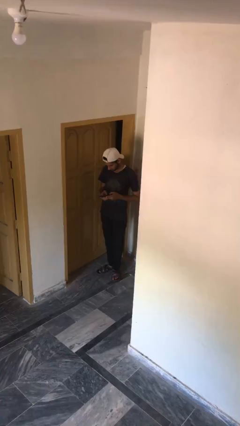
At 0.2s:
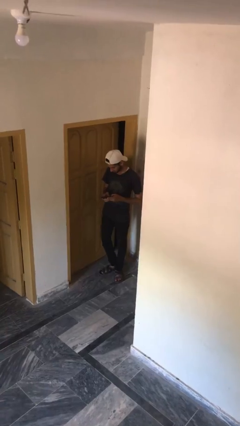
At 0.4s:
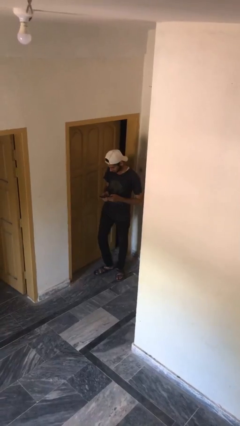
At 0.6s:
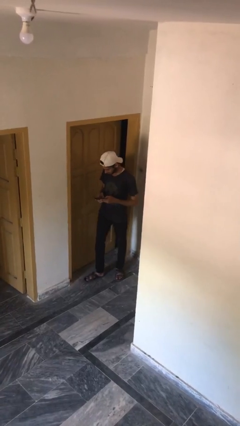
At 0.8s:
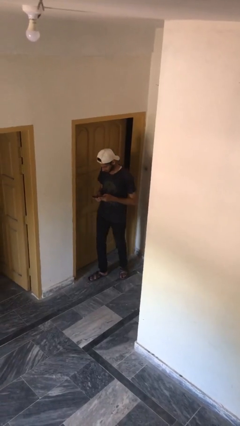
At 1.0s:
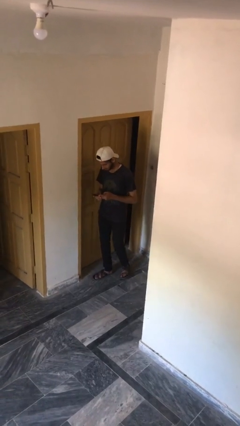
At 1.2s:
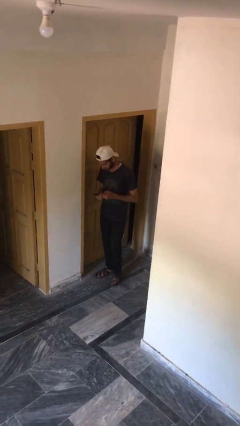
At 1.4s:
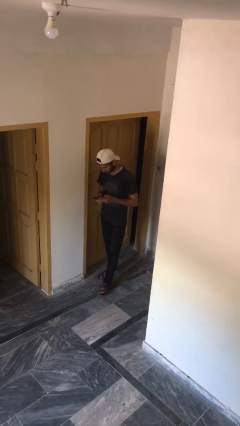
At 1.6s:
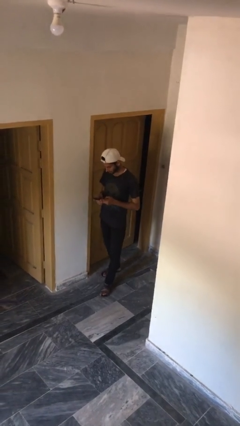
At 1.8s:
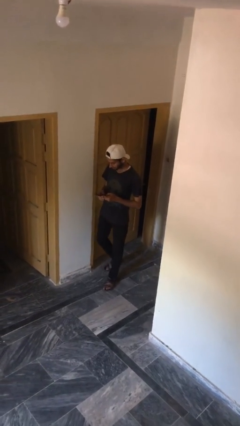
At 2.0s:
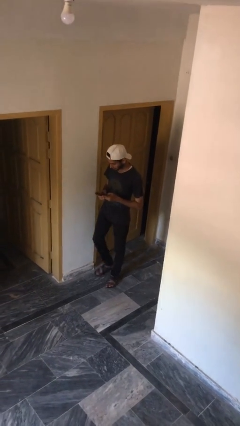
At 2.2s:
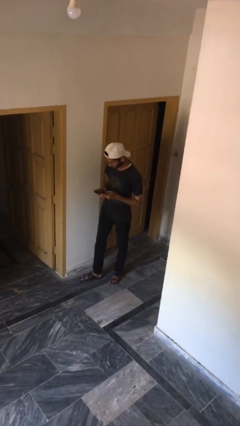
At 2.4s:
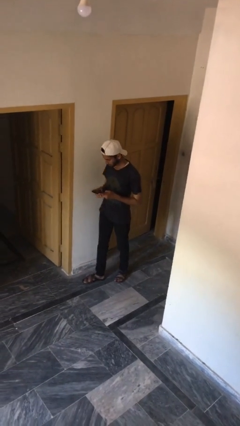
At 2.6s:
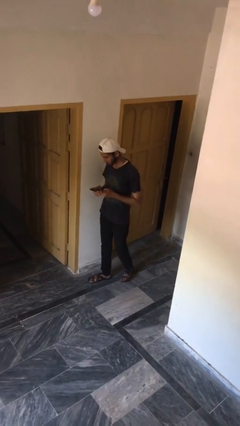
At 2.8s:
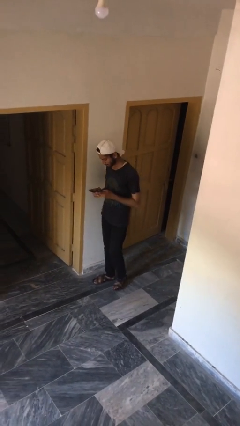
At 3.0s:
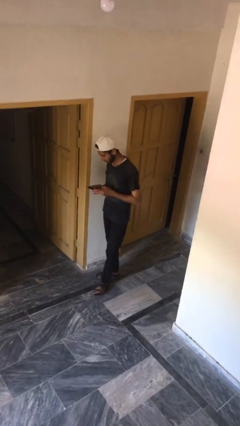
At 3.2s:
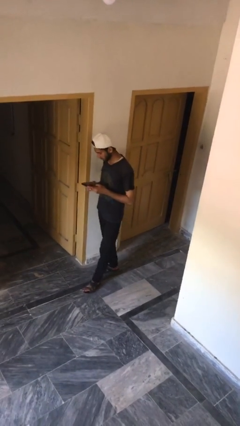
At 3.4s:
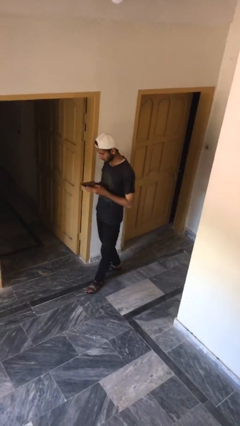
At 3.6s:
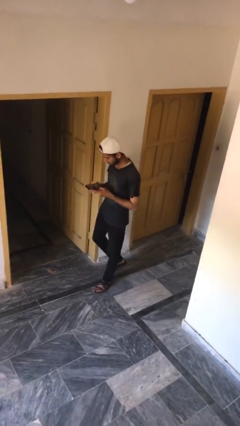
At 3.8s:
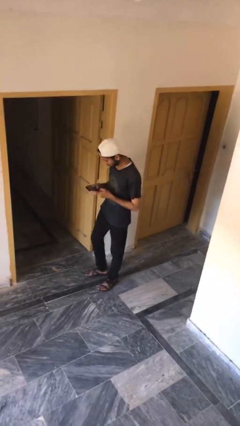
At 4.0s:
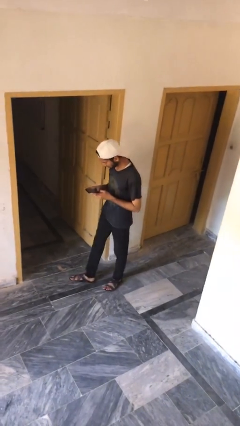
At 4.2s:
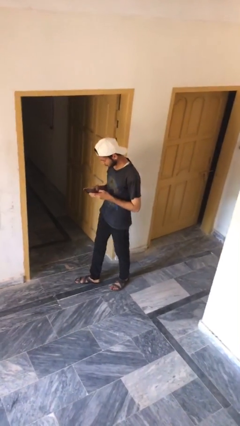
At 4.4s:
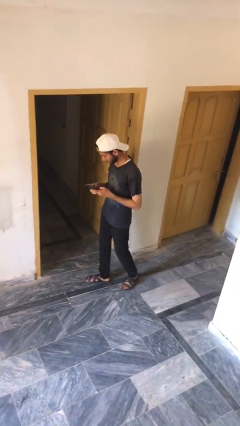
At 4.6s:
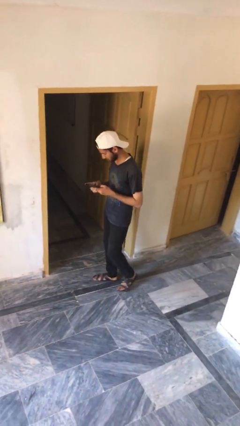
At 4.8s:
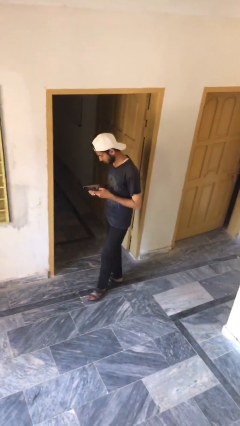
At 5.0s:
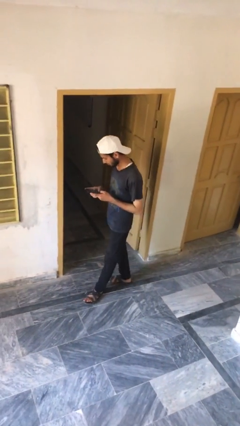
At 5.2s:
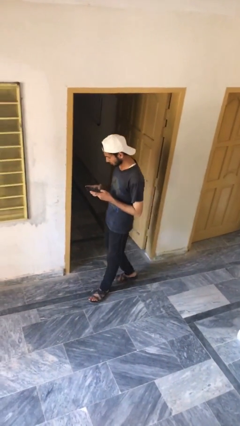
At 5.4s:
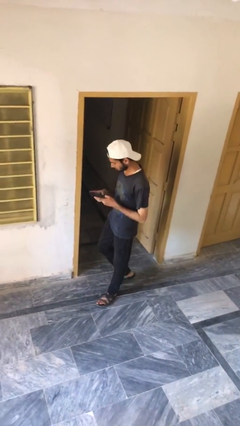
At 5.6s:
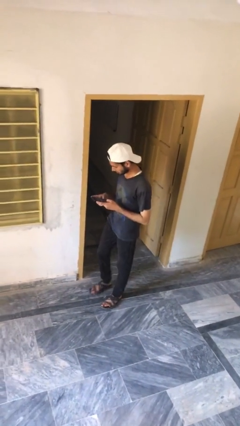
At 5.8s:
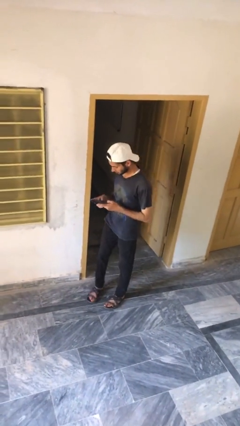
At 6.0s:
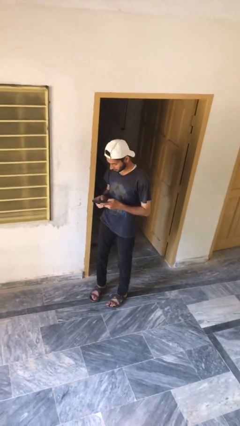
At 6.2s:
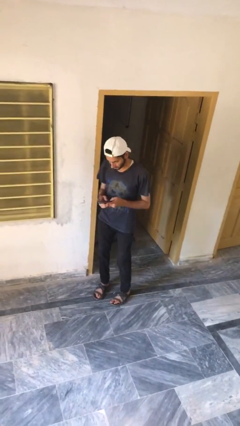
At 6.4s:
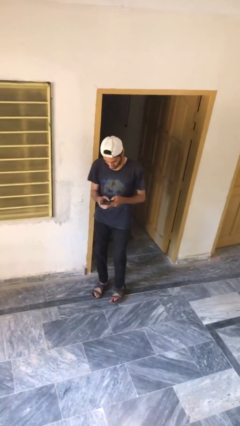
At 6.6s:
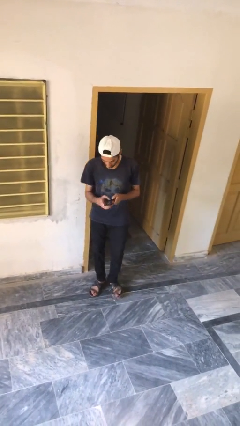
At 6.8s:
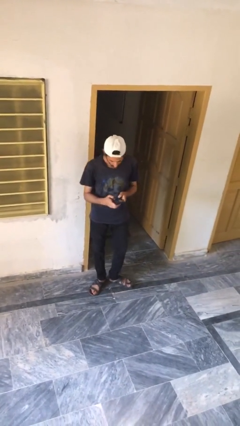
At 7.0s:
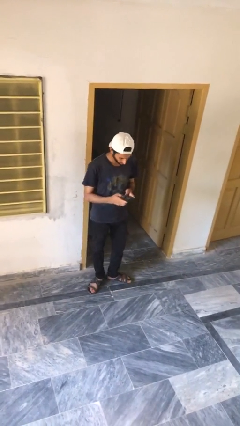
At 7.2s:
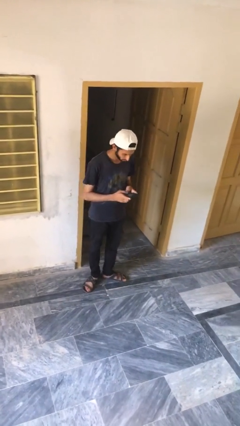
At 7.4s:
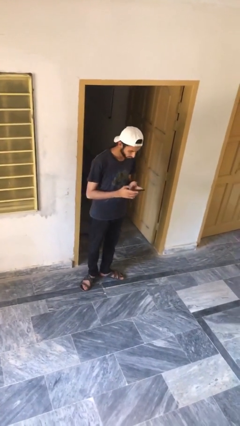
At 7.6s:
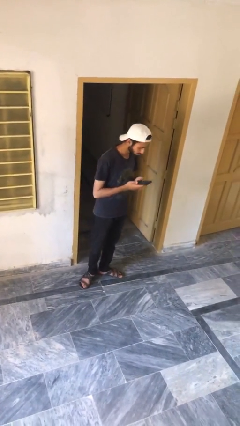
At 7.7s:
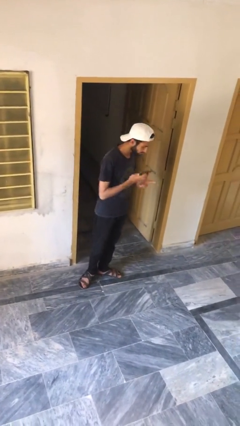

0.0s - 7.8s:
person texts on phone

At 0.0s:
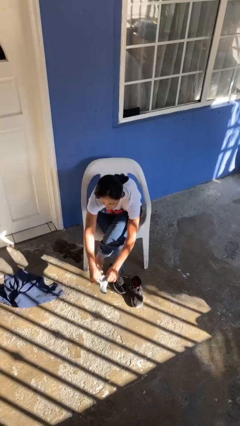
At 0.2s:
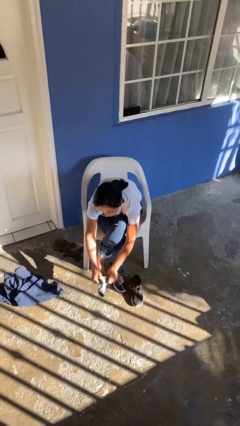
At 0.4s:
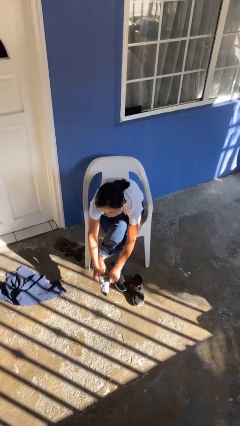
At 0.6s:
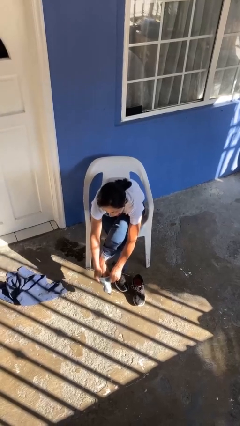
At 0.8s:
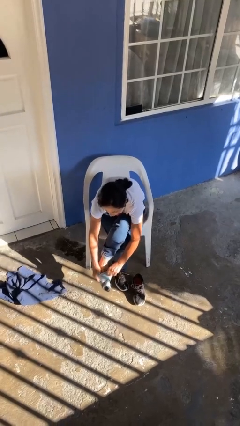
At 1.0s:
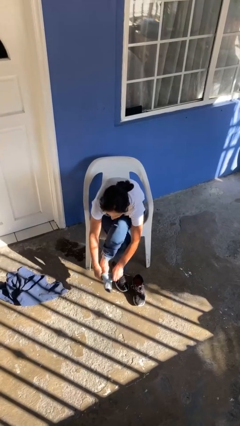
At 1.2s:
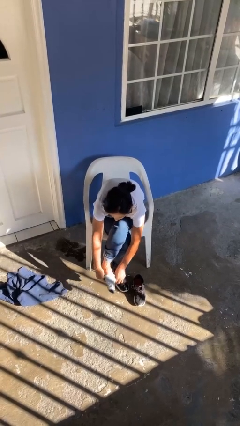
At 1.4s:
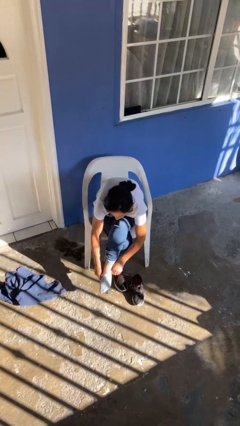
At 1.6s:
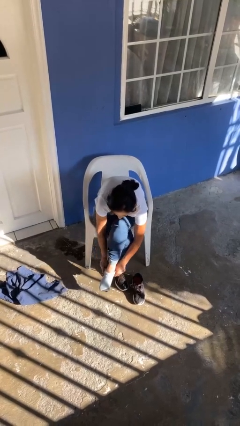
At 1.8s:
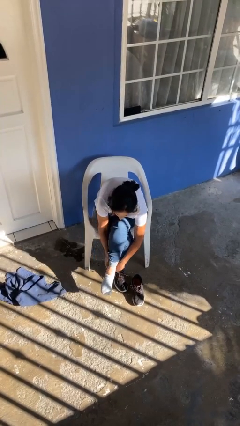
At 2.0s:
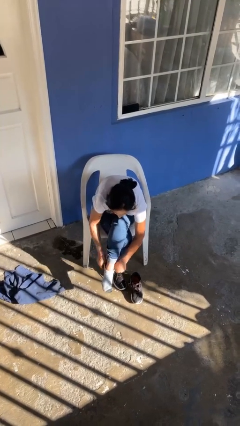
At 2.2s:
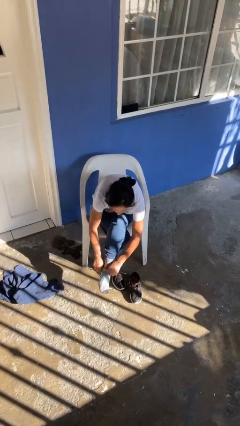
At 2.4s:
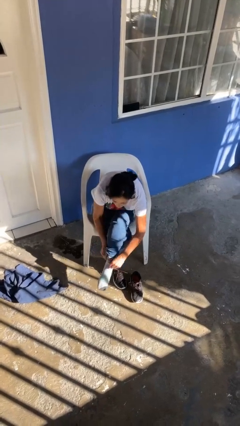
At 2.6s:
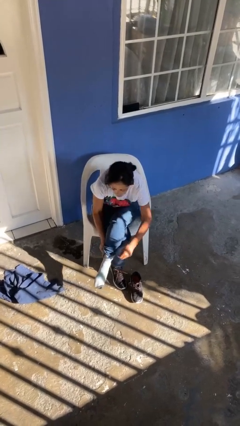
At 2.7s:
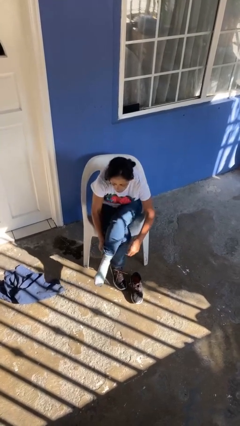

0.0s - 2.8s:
person puts on socks

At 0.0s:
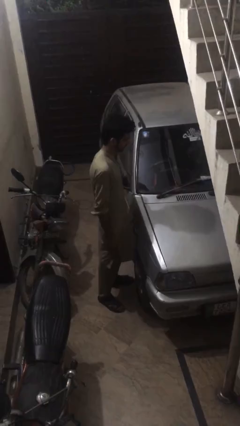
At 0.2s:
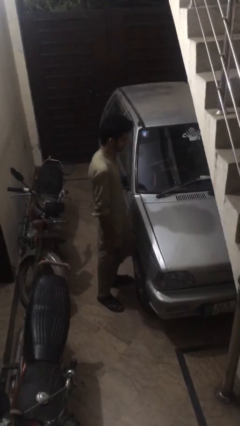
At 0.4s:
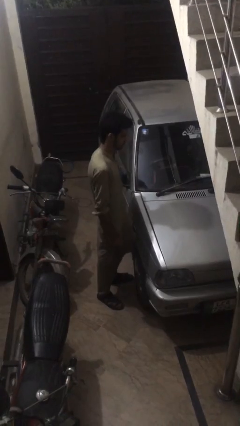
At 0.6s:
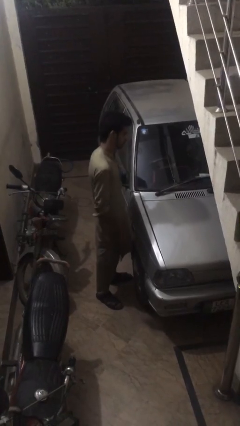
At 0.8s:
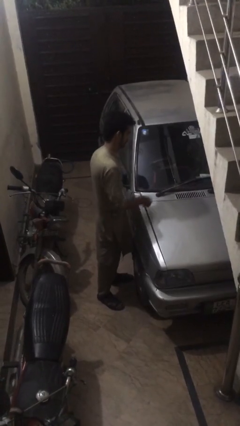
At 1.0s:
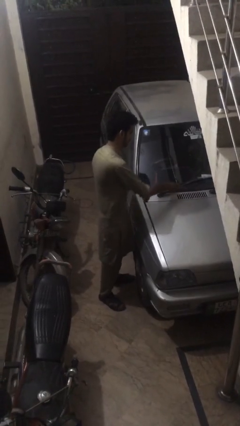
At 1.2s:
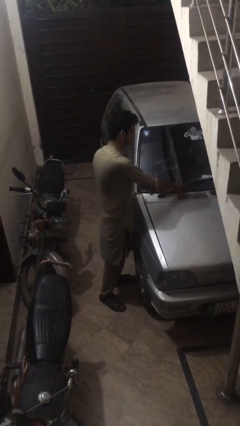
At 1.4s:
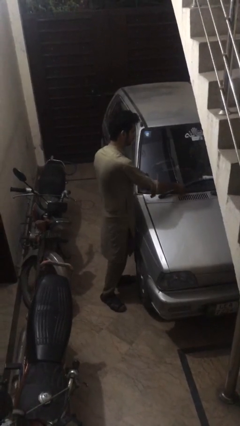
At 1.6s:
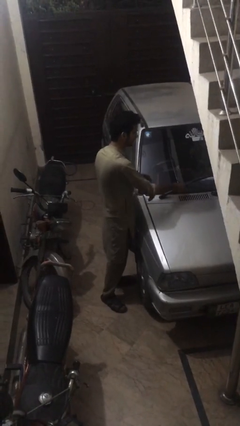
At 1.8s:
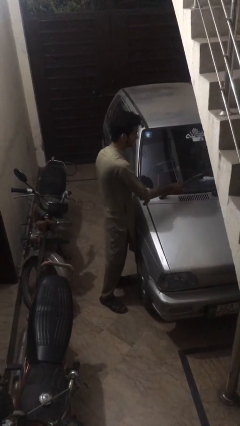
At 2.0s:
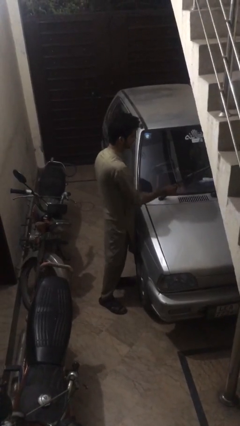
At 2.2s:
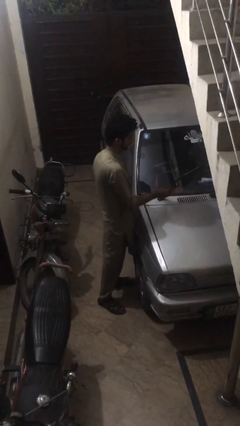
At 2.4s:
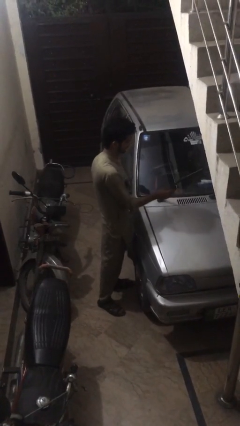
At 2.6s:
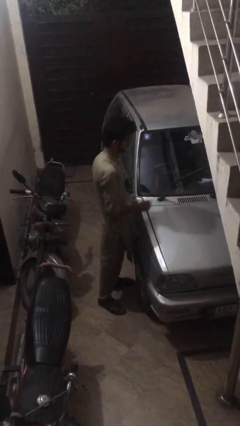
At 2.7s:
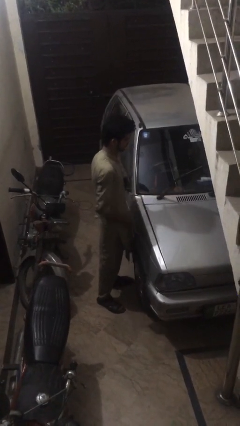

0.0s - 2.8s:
person flips up car wipers

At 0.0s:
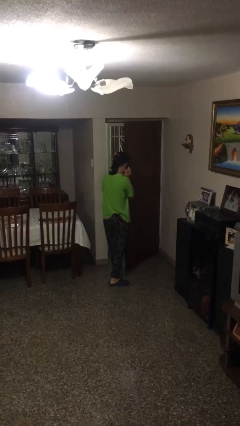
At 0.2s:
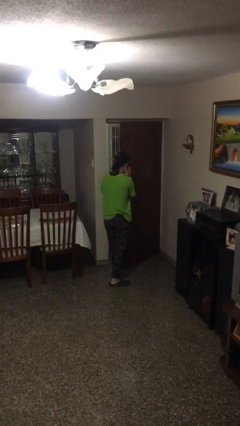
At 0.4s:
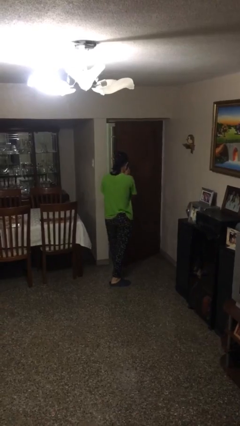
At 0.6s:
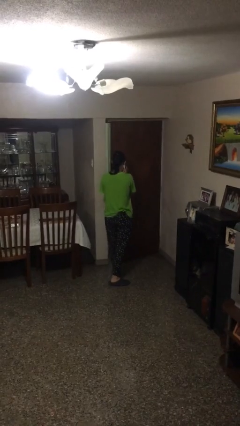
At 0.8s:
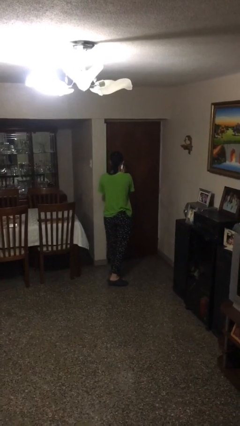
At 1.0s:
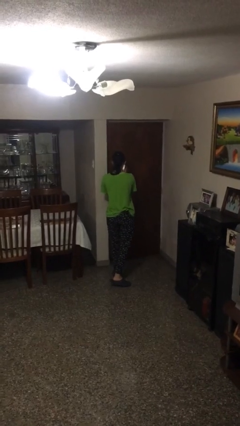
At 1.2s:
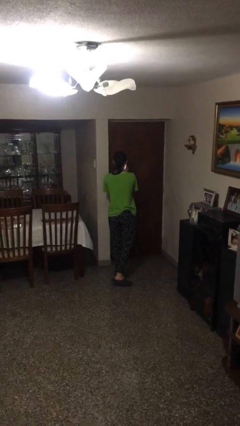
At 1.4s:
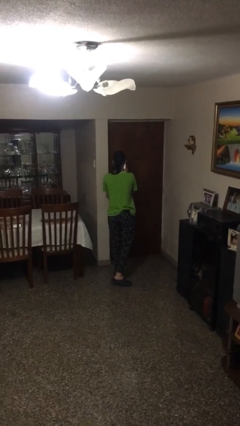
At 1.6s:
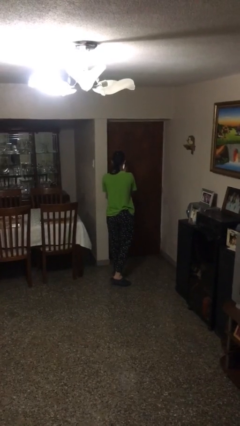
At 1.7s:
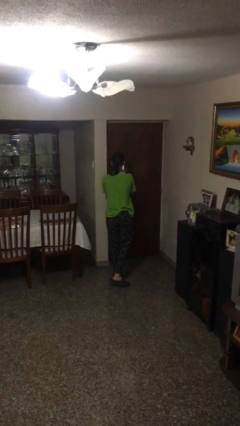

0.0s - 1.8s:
person closes facility door

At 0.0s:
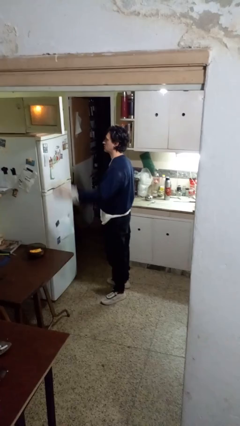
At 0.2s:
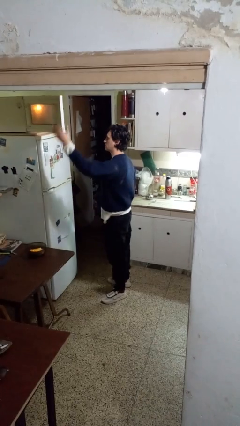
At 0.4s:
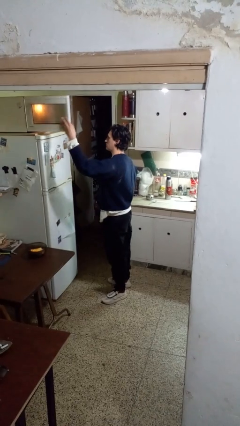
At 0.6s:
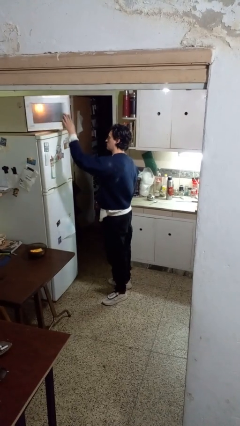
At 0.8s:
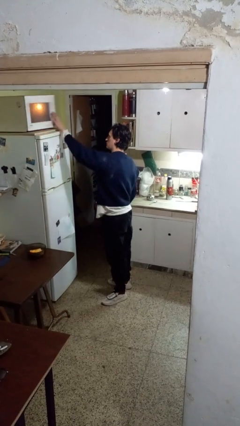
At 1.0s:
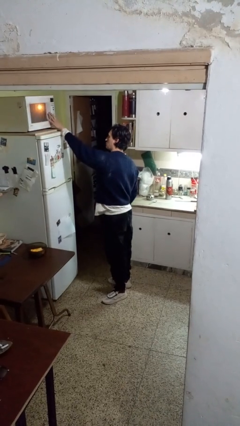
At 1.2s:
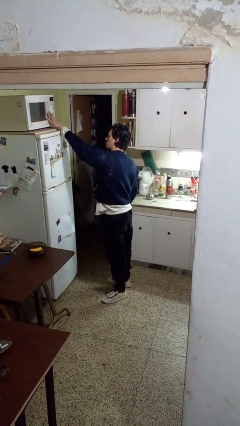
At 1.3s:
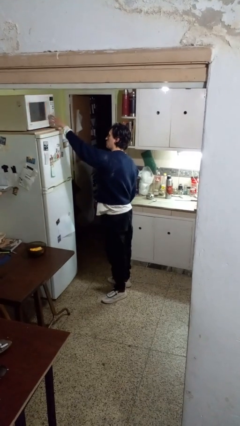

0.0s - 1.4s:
person closes microwave

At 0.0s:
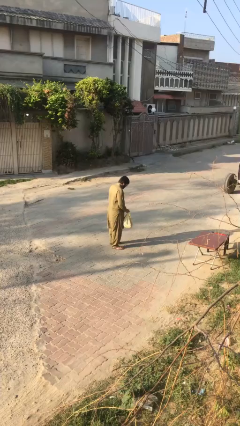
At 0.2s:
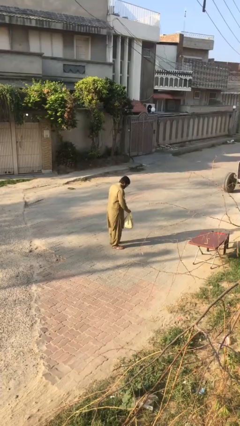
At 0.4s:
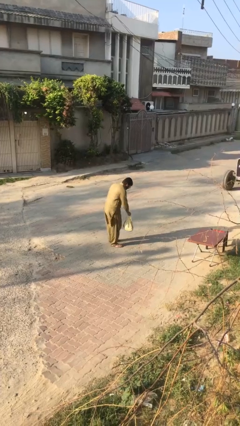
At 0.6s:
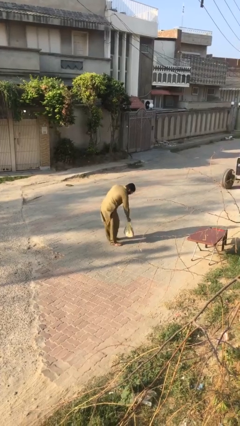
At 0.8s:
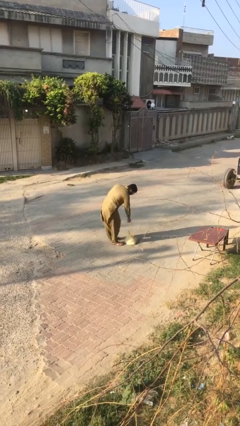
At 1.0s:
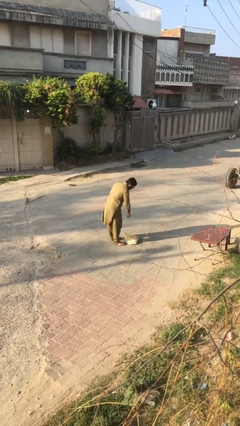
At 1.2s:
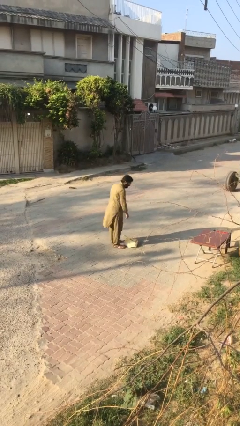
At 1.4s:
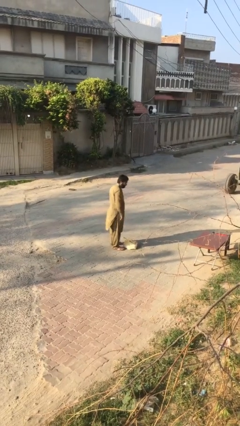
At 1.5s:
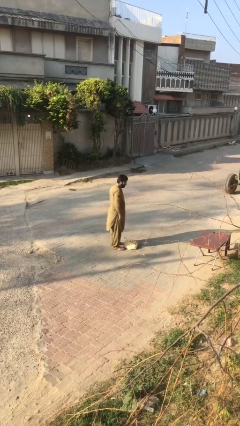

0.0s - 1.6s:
person puts down object on floor
